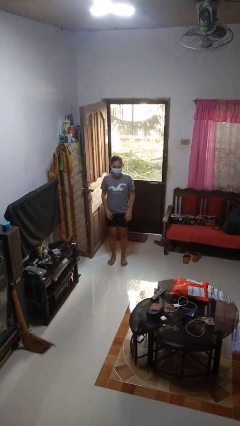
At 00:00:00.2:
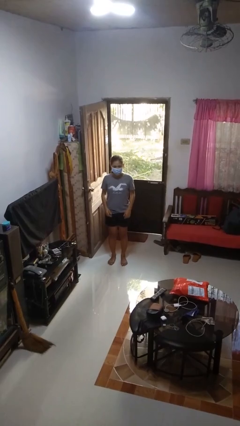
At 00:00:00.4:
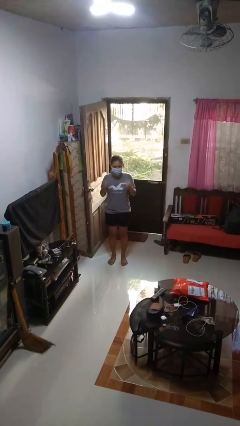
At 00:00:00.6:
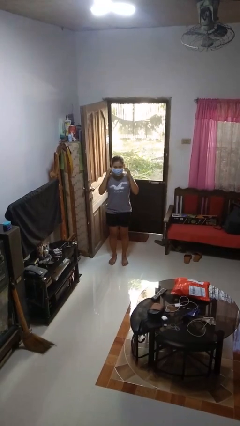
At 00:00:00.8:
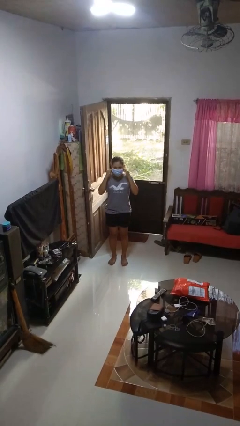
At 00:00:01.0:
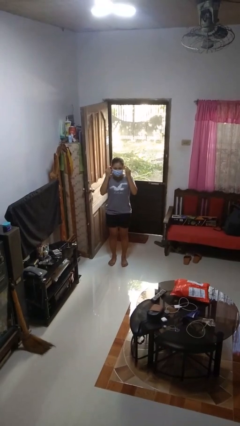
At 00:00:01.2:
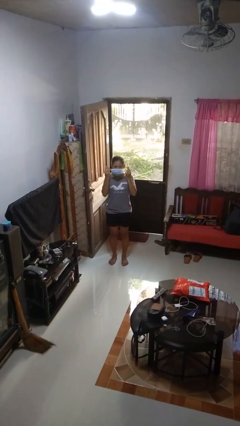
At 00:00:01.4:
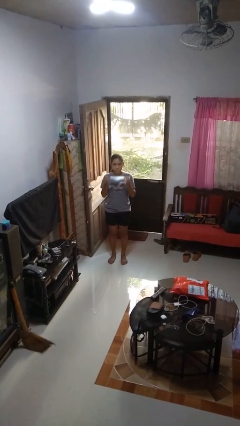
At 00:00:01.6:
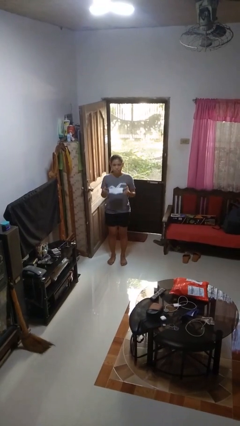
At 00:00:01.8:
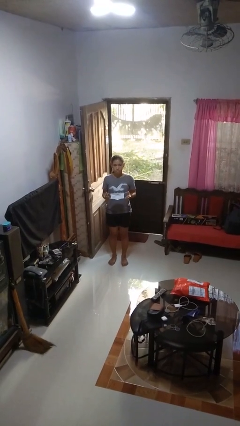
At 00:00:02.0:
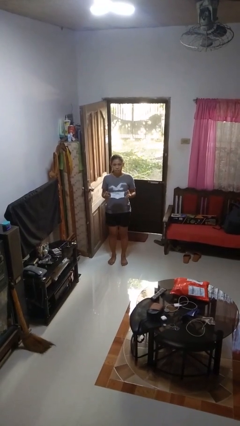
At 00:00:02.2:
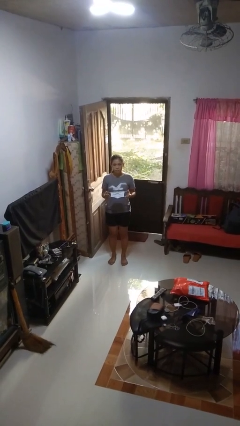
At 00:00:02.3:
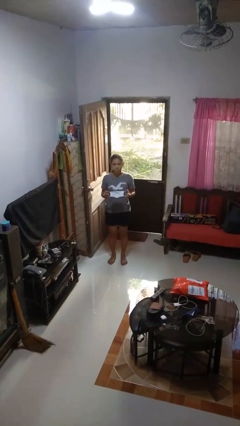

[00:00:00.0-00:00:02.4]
person takes off facemask

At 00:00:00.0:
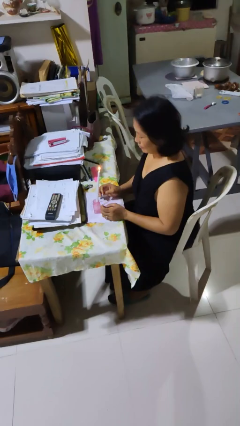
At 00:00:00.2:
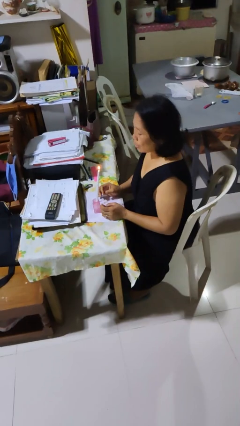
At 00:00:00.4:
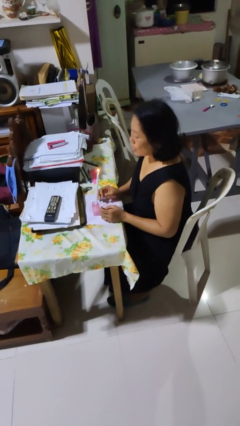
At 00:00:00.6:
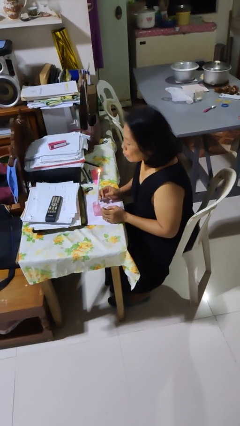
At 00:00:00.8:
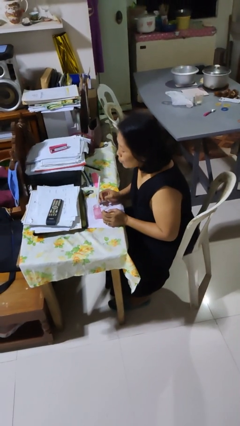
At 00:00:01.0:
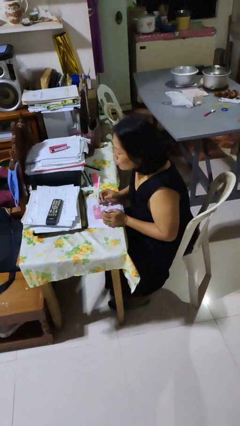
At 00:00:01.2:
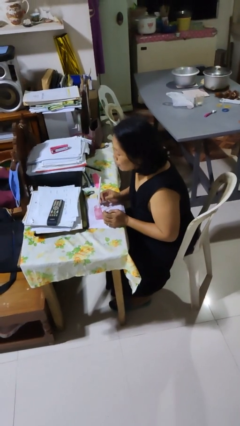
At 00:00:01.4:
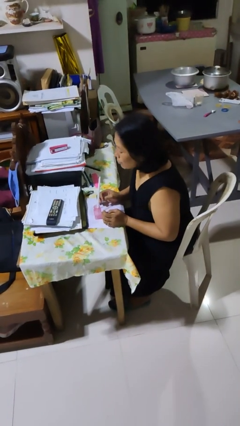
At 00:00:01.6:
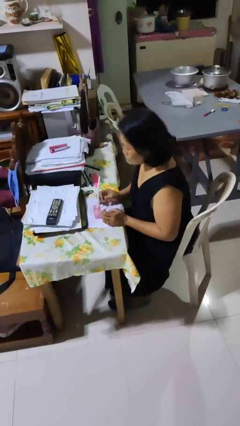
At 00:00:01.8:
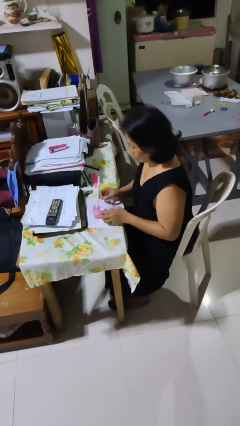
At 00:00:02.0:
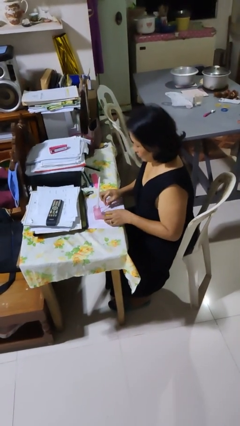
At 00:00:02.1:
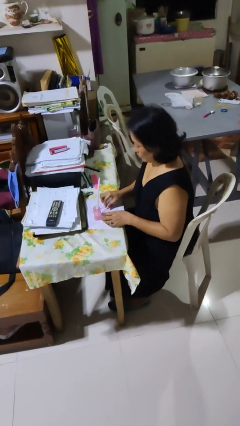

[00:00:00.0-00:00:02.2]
person extinguishes candle

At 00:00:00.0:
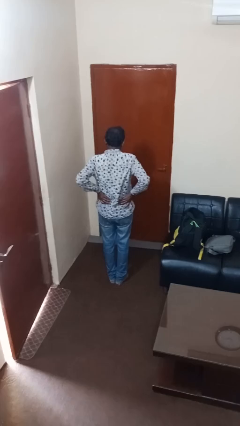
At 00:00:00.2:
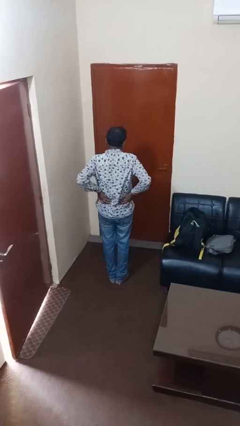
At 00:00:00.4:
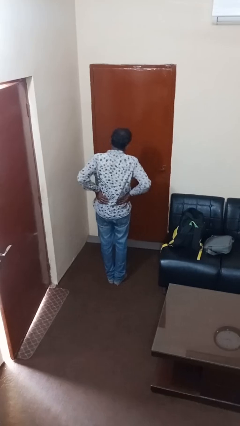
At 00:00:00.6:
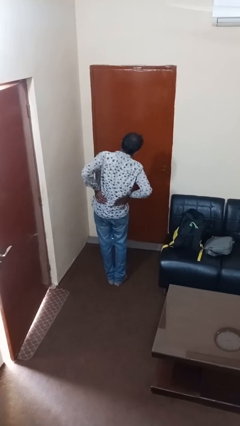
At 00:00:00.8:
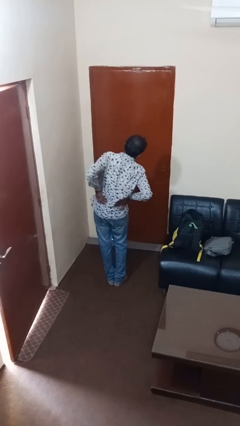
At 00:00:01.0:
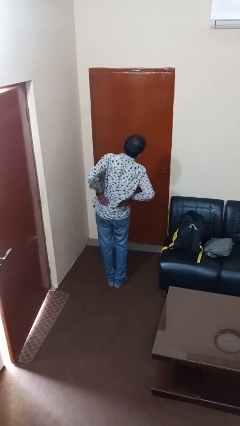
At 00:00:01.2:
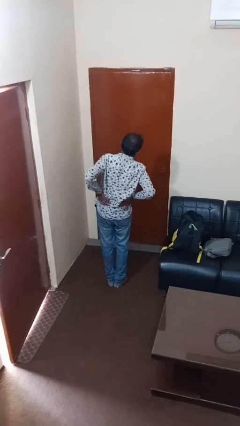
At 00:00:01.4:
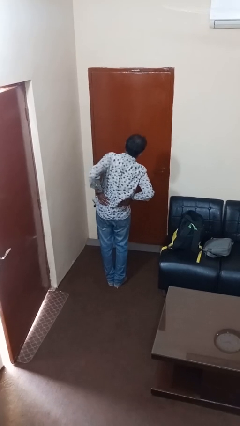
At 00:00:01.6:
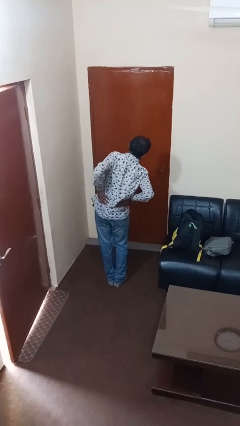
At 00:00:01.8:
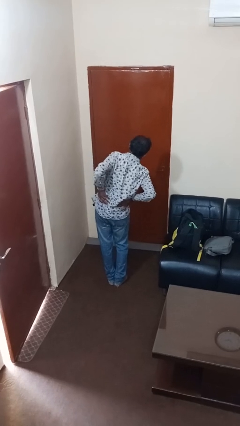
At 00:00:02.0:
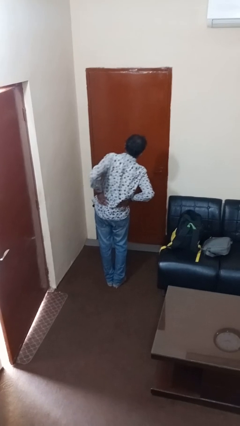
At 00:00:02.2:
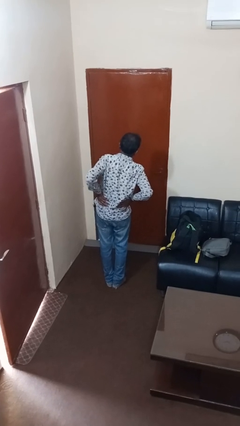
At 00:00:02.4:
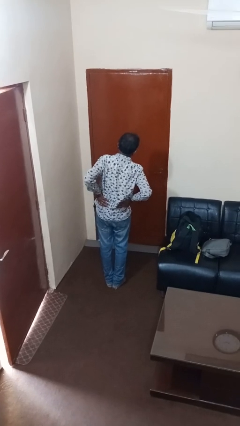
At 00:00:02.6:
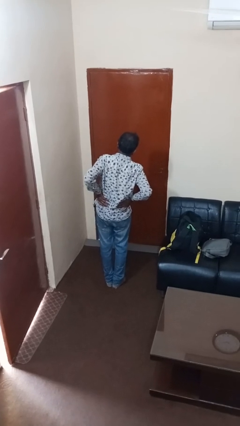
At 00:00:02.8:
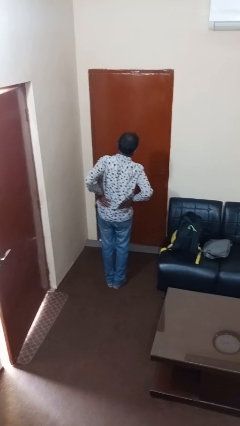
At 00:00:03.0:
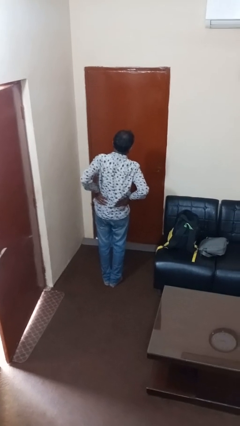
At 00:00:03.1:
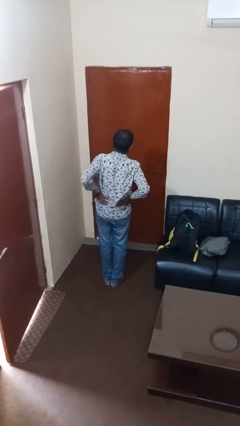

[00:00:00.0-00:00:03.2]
person stretches arms to side

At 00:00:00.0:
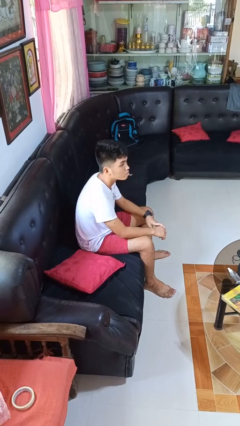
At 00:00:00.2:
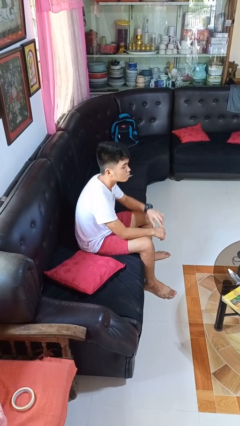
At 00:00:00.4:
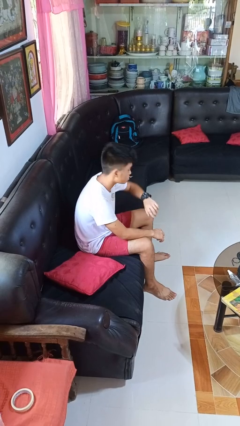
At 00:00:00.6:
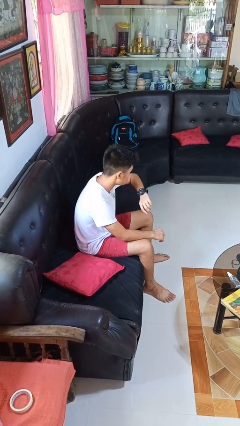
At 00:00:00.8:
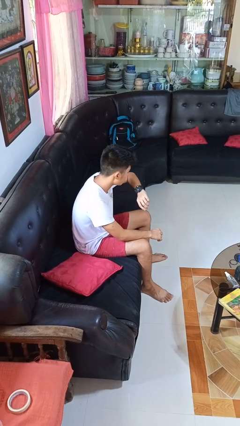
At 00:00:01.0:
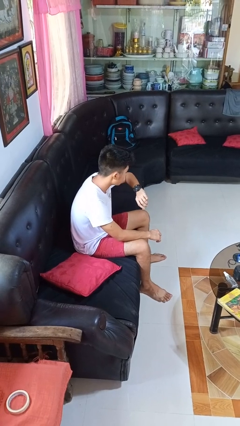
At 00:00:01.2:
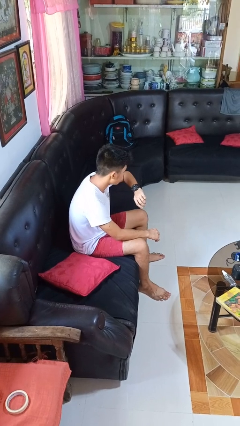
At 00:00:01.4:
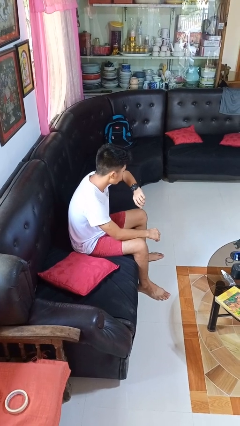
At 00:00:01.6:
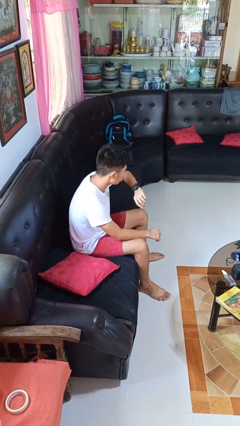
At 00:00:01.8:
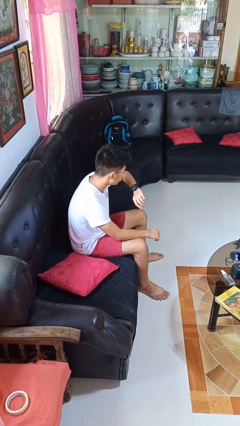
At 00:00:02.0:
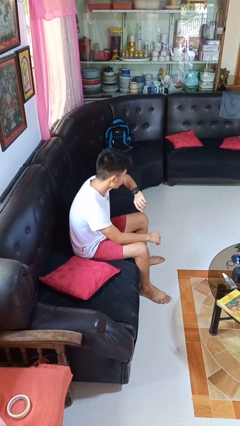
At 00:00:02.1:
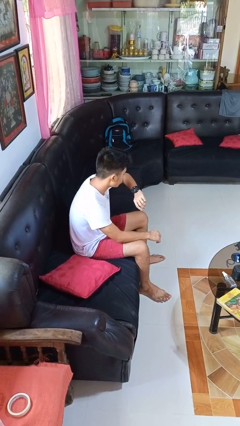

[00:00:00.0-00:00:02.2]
person looks at wristwatch

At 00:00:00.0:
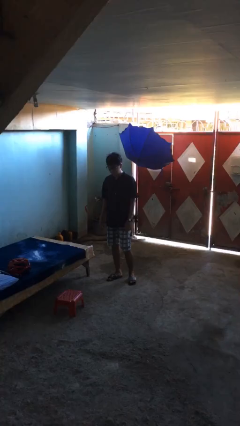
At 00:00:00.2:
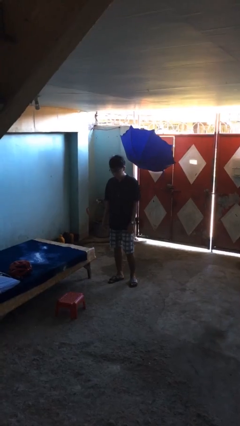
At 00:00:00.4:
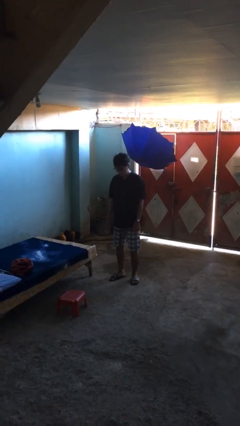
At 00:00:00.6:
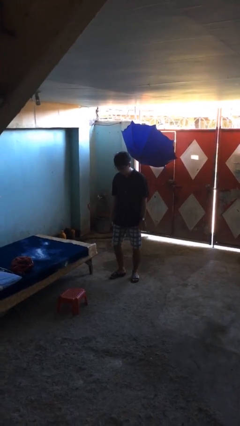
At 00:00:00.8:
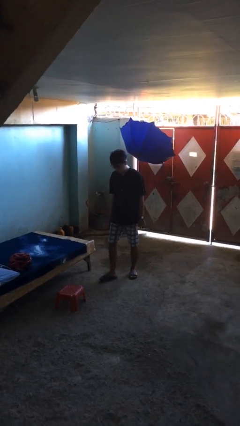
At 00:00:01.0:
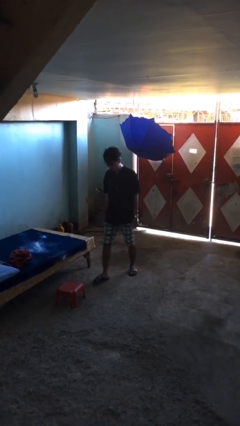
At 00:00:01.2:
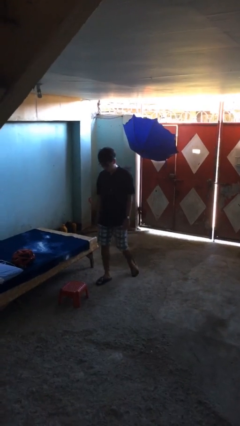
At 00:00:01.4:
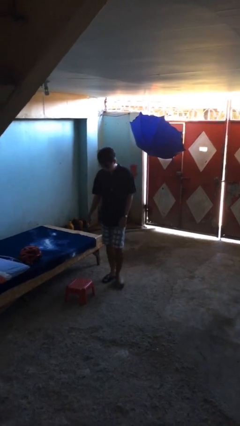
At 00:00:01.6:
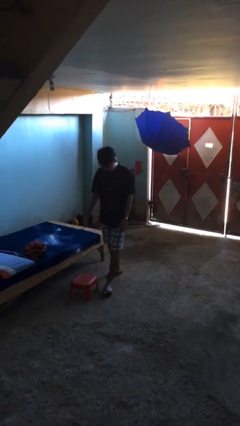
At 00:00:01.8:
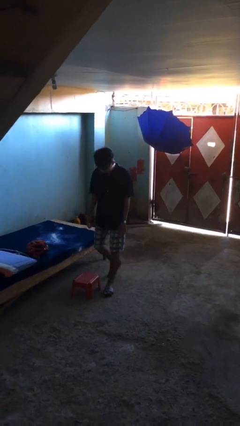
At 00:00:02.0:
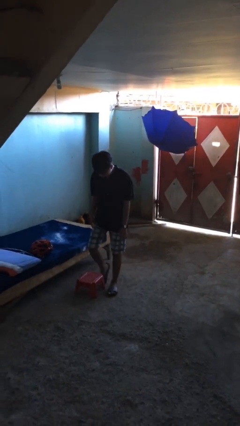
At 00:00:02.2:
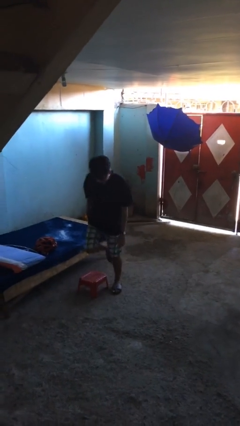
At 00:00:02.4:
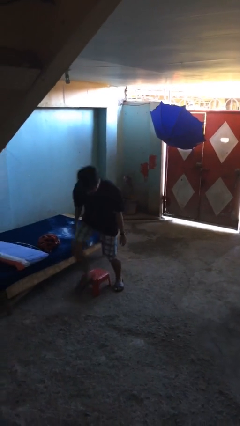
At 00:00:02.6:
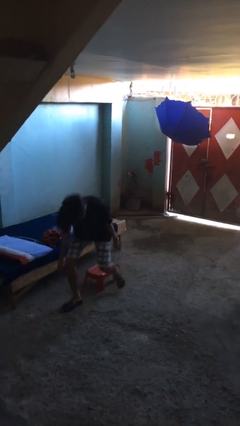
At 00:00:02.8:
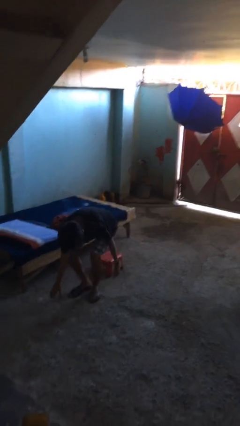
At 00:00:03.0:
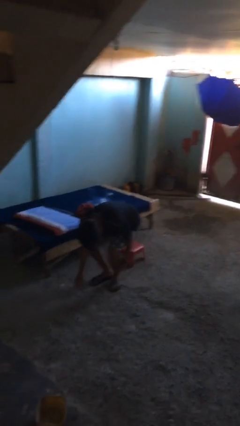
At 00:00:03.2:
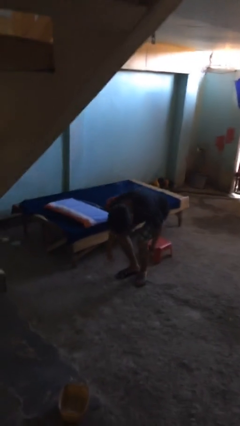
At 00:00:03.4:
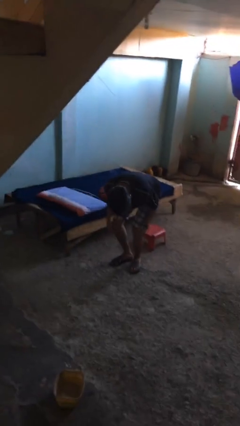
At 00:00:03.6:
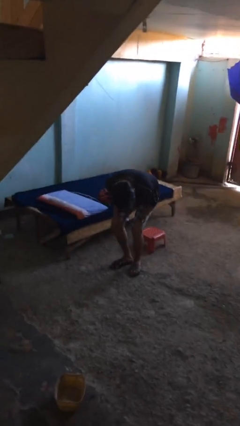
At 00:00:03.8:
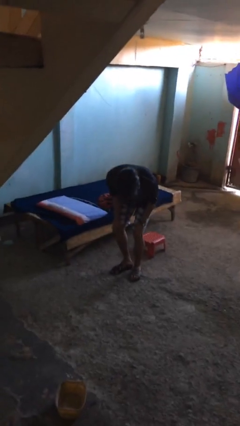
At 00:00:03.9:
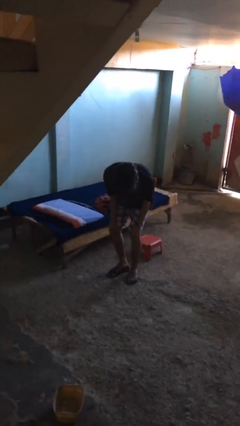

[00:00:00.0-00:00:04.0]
person trips on object on floor

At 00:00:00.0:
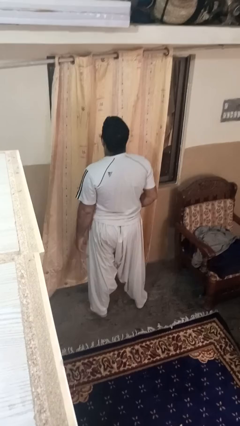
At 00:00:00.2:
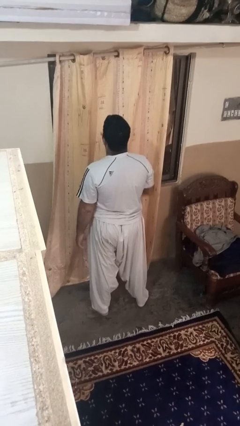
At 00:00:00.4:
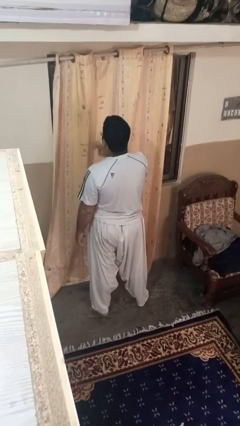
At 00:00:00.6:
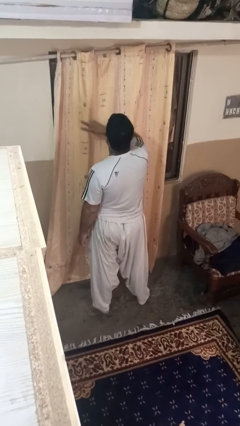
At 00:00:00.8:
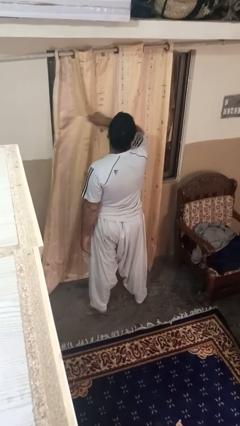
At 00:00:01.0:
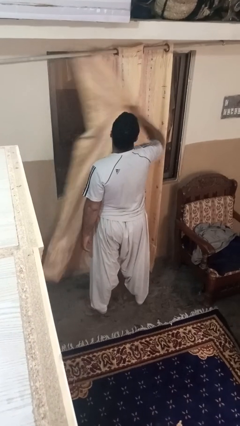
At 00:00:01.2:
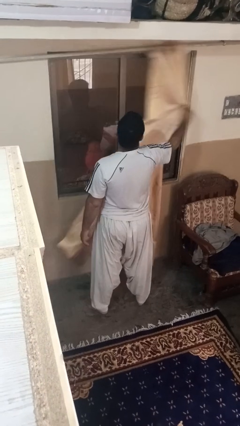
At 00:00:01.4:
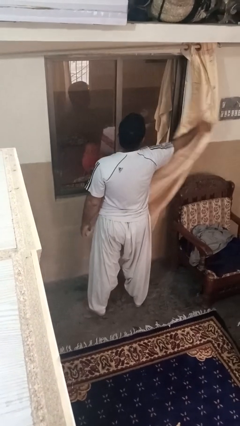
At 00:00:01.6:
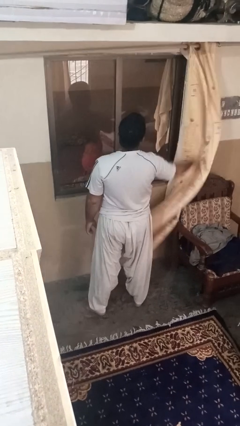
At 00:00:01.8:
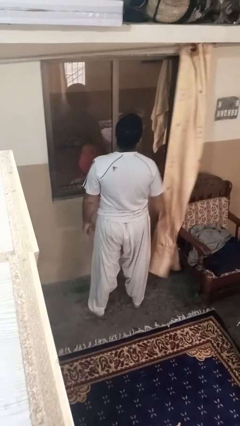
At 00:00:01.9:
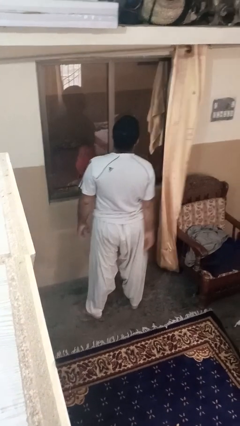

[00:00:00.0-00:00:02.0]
person opens curtains

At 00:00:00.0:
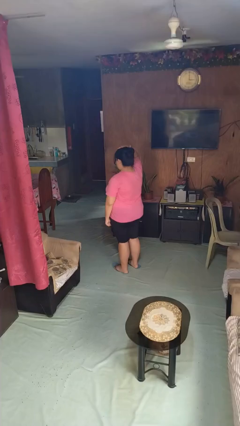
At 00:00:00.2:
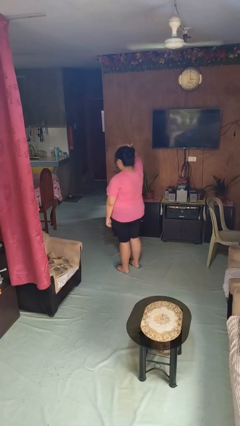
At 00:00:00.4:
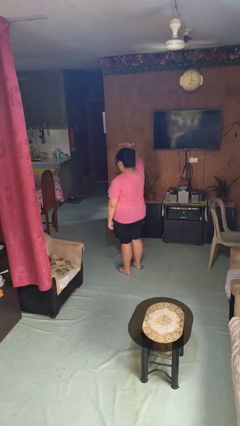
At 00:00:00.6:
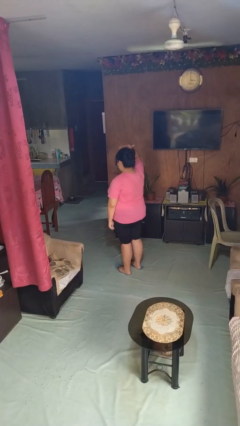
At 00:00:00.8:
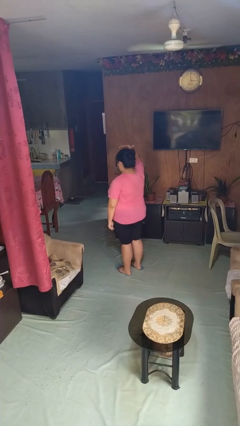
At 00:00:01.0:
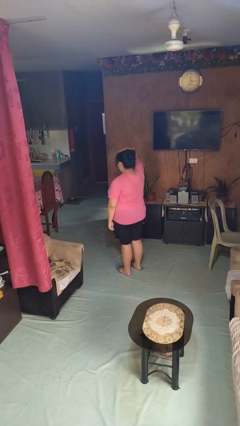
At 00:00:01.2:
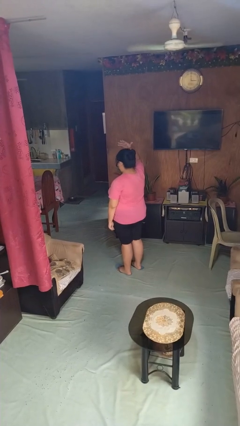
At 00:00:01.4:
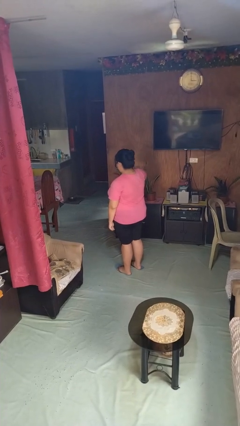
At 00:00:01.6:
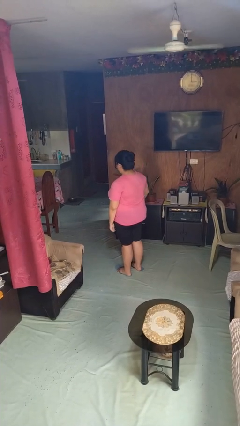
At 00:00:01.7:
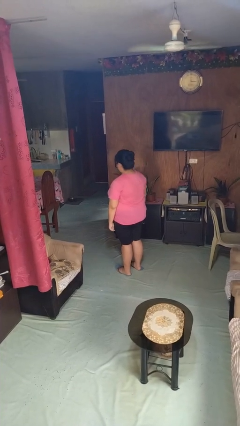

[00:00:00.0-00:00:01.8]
person pats head
